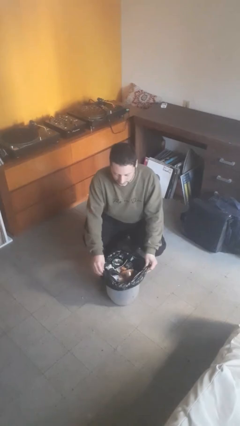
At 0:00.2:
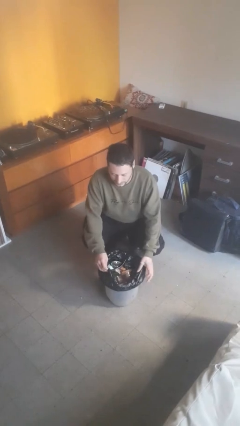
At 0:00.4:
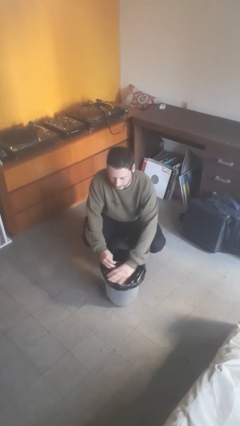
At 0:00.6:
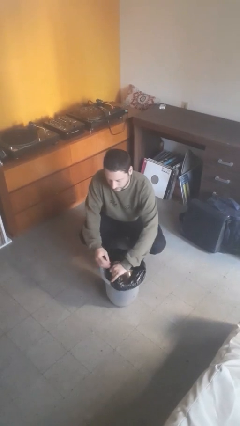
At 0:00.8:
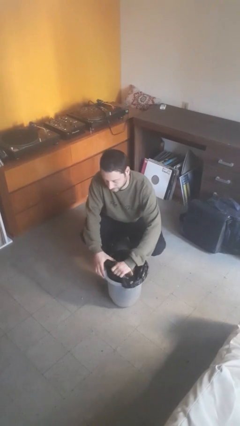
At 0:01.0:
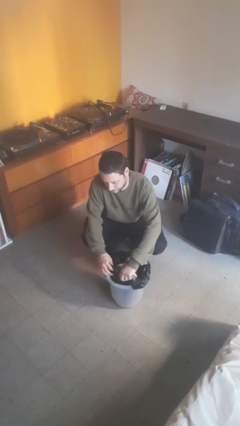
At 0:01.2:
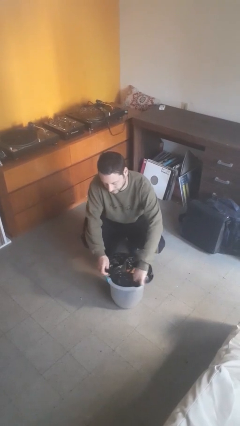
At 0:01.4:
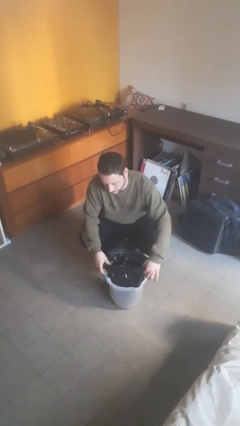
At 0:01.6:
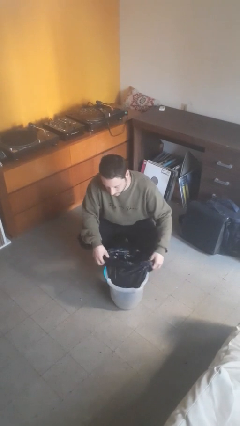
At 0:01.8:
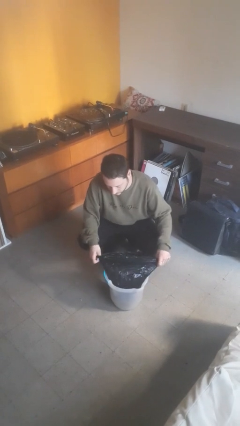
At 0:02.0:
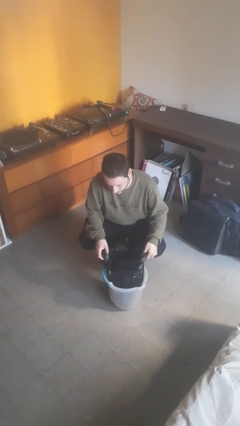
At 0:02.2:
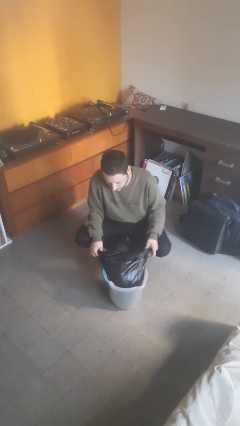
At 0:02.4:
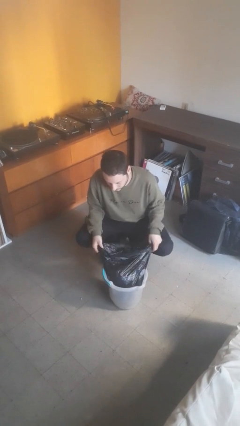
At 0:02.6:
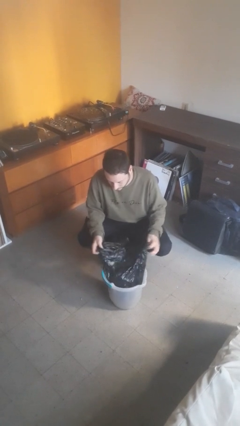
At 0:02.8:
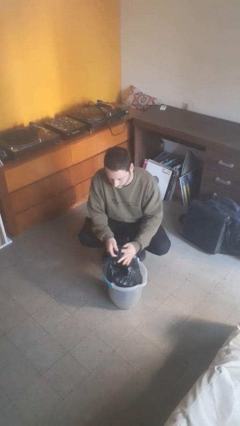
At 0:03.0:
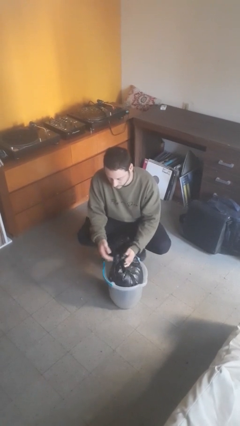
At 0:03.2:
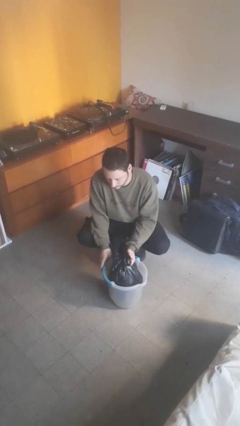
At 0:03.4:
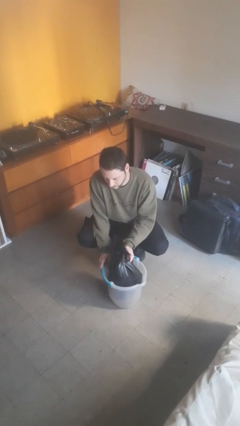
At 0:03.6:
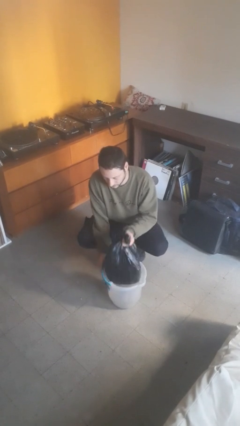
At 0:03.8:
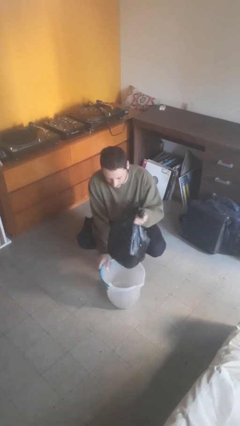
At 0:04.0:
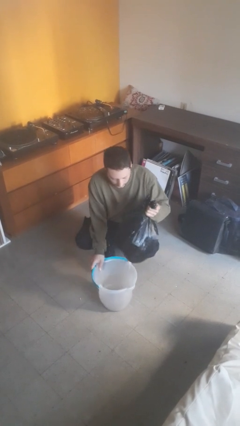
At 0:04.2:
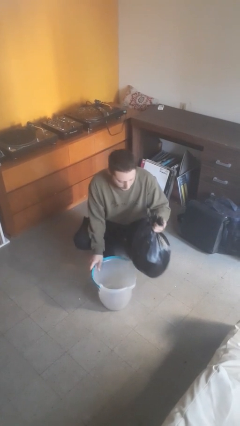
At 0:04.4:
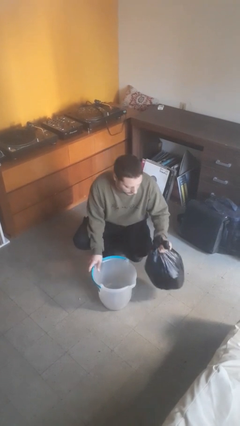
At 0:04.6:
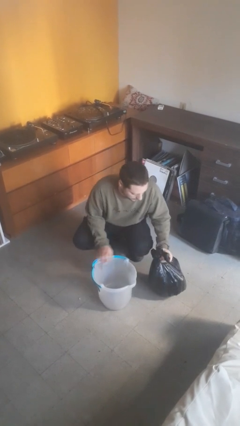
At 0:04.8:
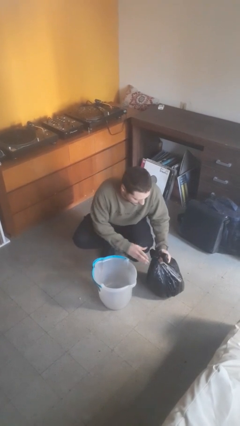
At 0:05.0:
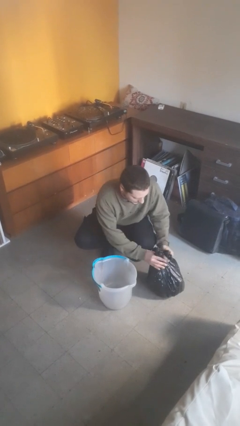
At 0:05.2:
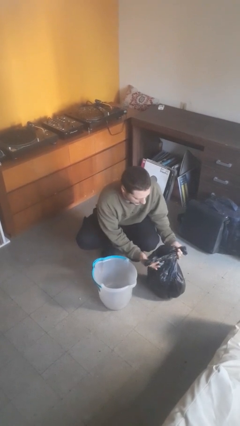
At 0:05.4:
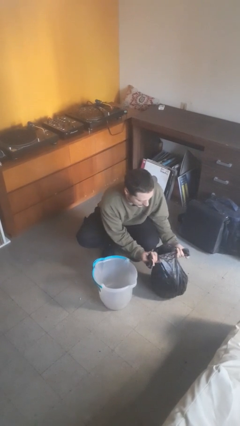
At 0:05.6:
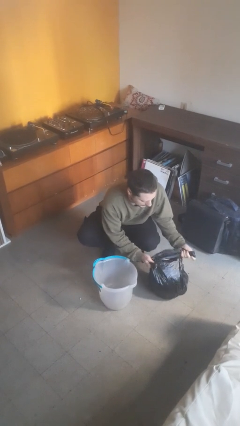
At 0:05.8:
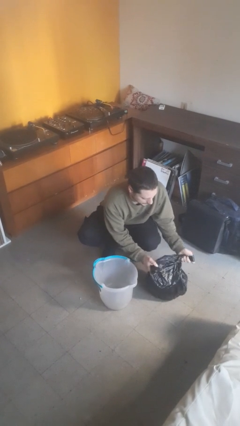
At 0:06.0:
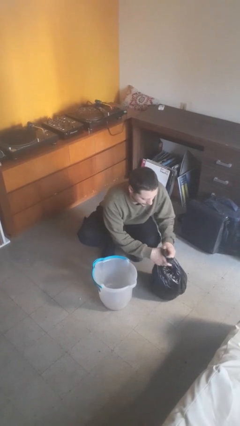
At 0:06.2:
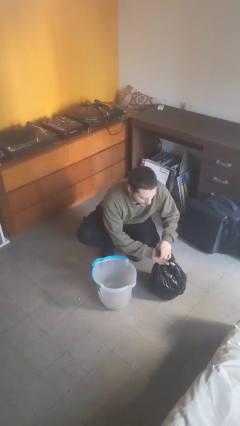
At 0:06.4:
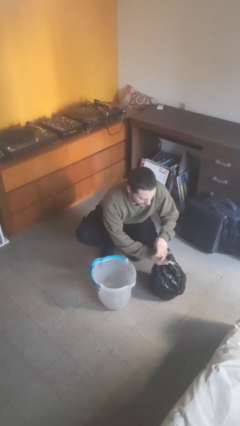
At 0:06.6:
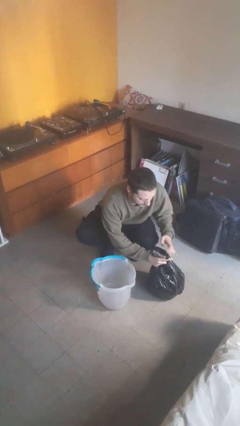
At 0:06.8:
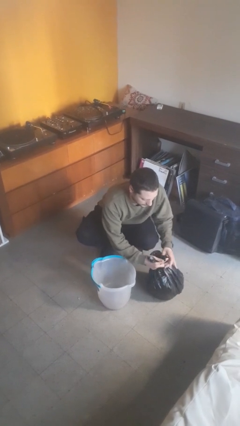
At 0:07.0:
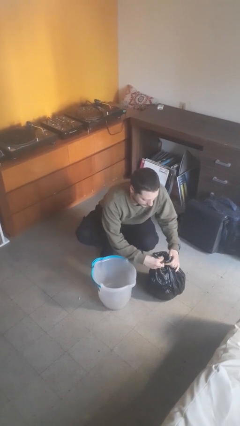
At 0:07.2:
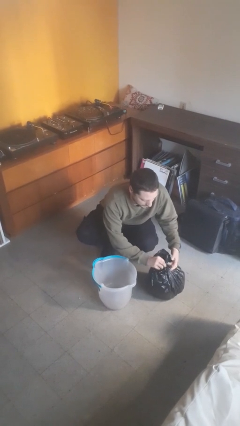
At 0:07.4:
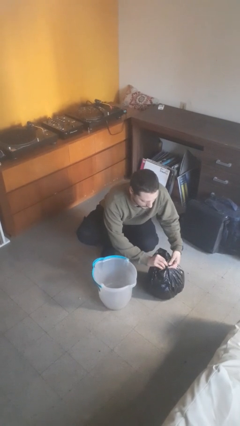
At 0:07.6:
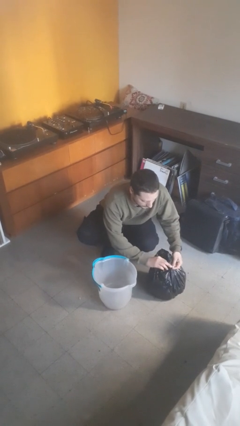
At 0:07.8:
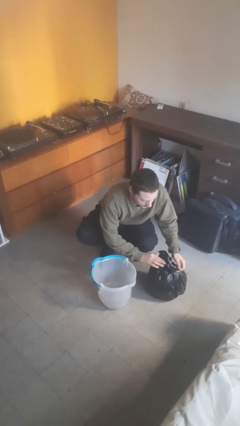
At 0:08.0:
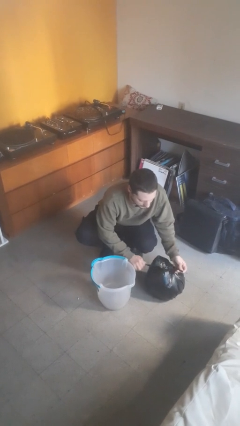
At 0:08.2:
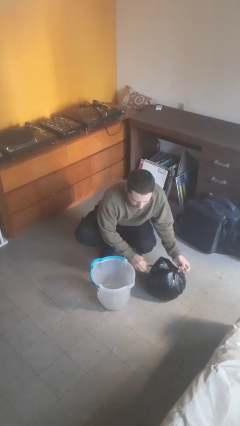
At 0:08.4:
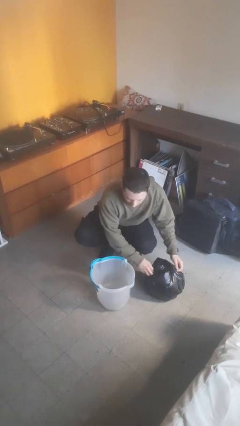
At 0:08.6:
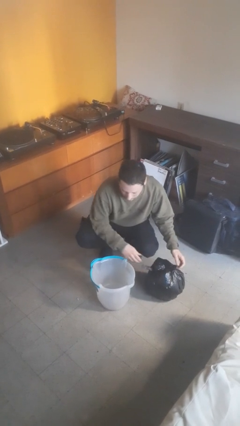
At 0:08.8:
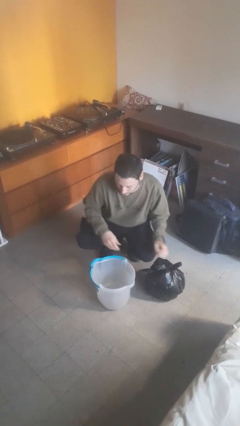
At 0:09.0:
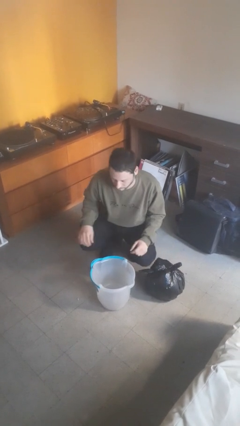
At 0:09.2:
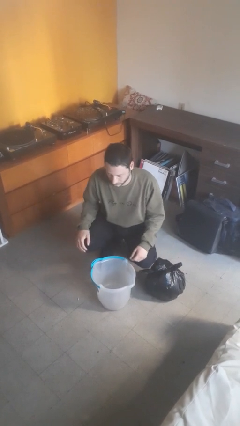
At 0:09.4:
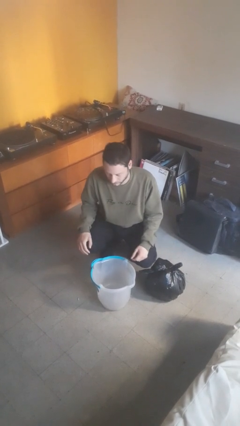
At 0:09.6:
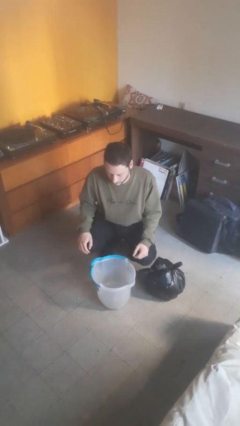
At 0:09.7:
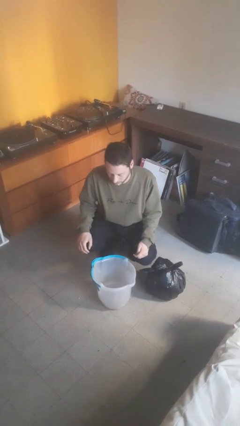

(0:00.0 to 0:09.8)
person removes trashbag from trashcan

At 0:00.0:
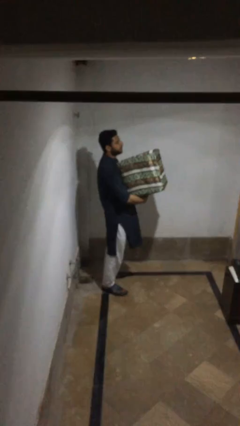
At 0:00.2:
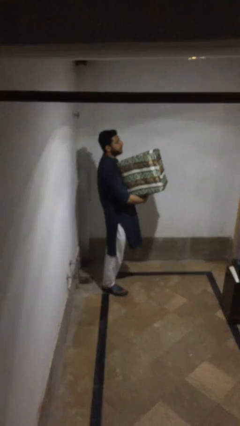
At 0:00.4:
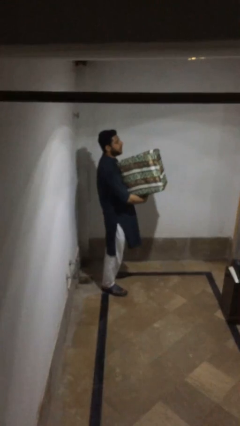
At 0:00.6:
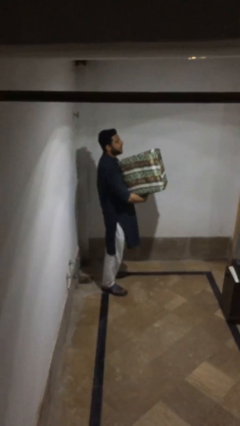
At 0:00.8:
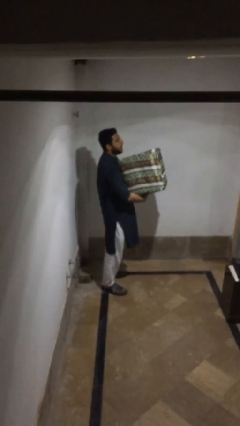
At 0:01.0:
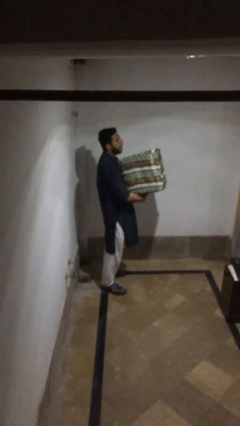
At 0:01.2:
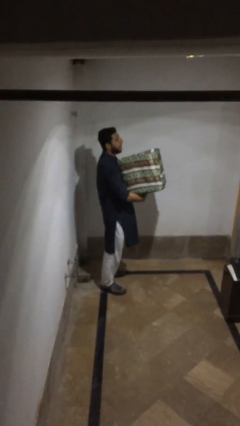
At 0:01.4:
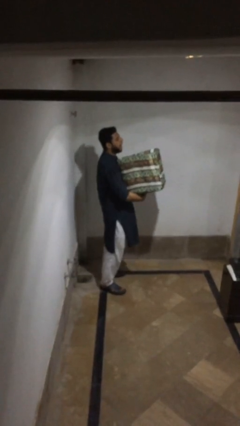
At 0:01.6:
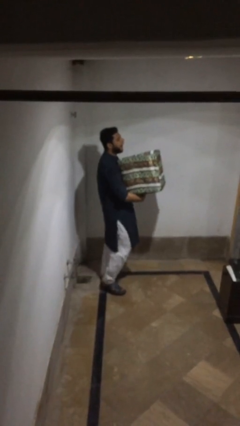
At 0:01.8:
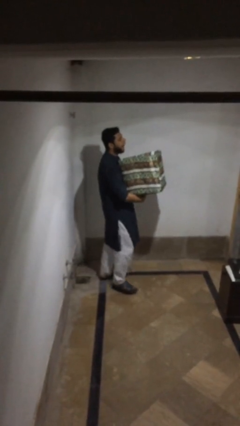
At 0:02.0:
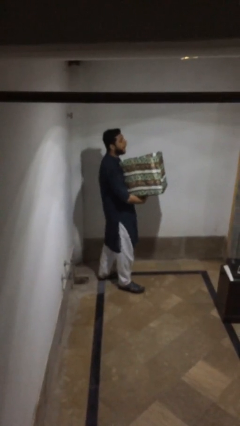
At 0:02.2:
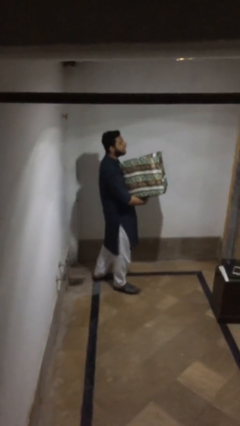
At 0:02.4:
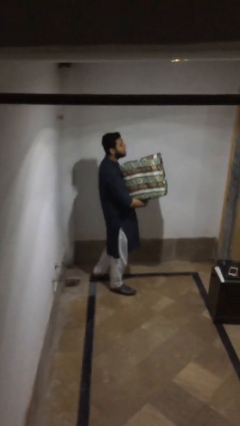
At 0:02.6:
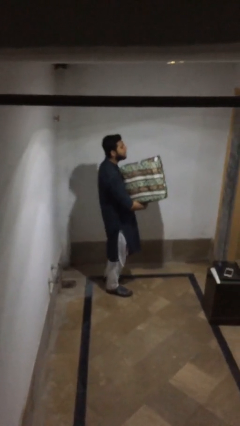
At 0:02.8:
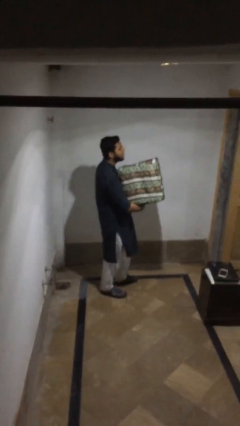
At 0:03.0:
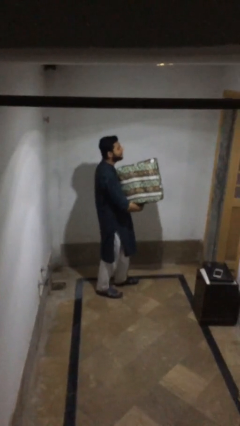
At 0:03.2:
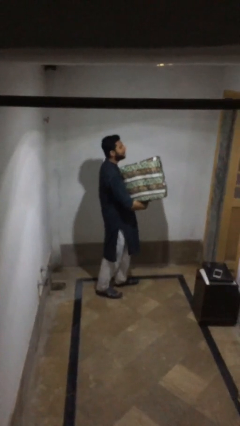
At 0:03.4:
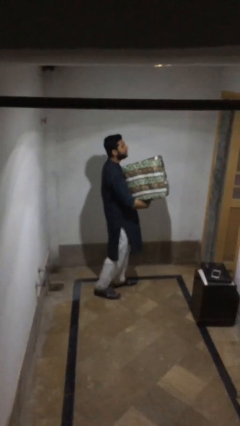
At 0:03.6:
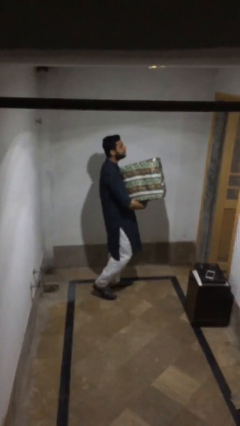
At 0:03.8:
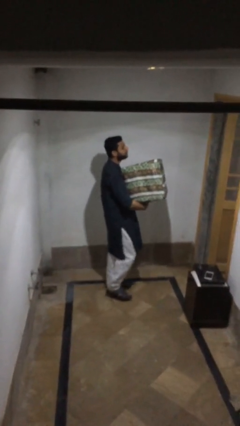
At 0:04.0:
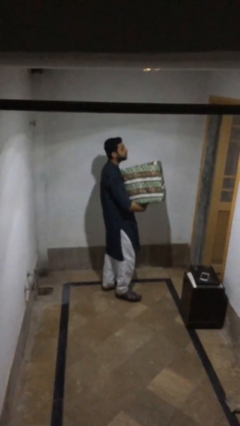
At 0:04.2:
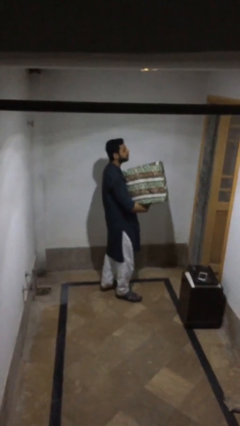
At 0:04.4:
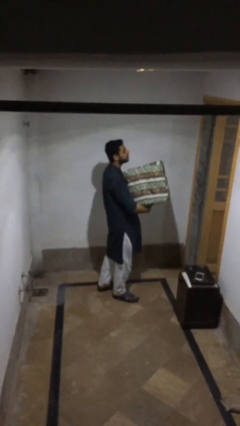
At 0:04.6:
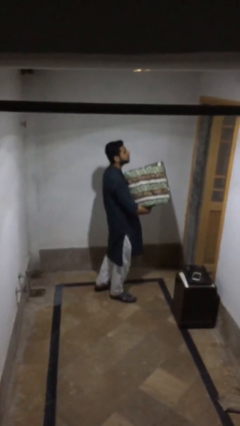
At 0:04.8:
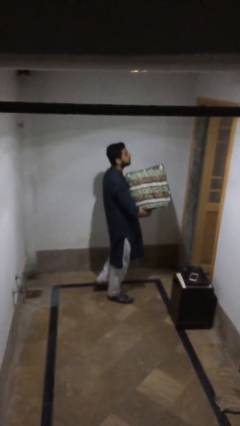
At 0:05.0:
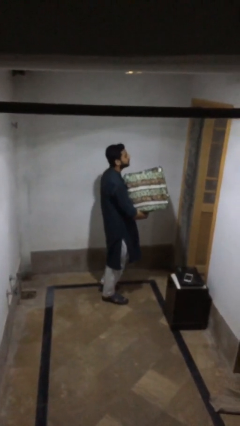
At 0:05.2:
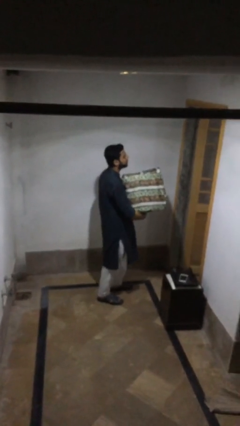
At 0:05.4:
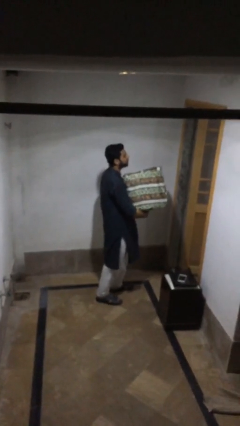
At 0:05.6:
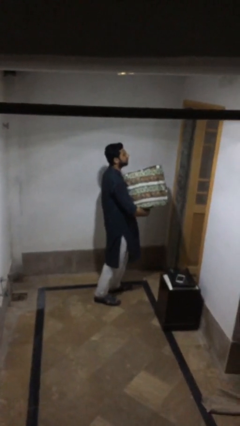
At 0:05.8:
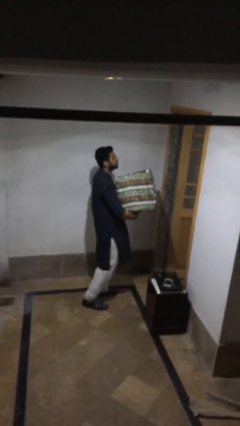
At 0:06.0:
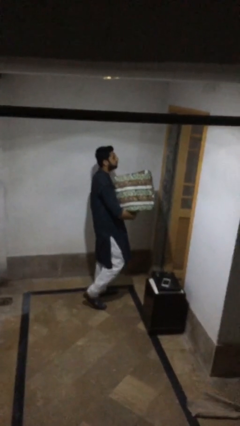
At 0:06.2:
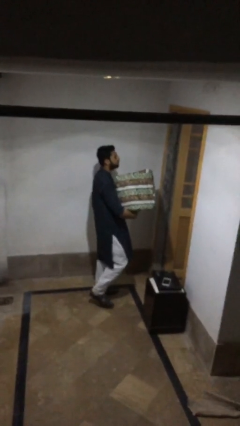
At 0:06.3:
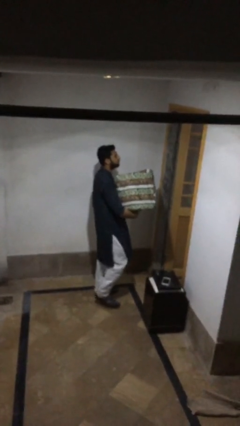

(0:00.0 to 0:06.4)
person carries heavy object

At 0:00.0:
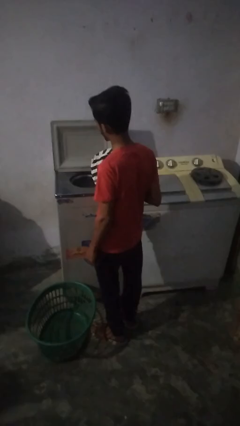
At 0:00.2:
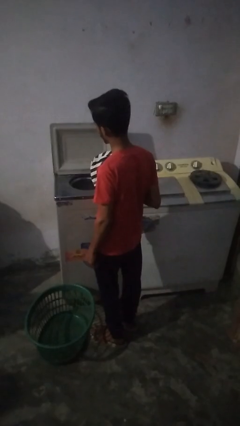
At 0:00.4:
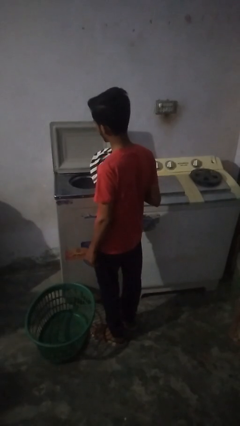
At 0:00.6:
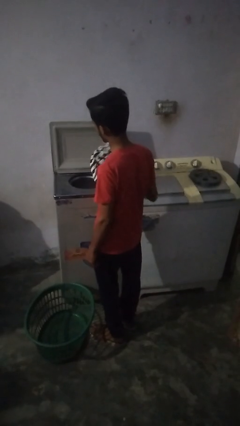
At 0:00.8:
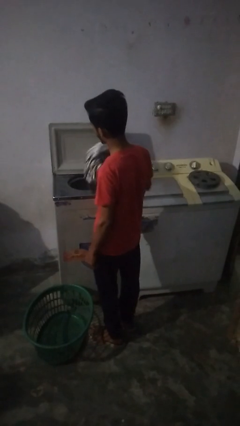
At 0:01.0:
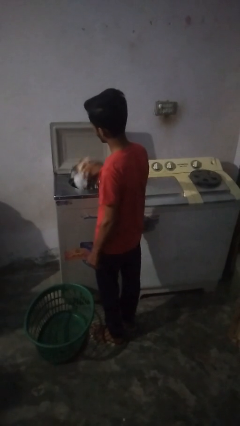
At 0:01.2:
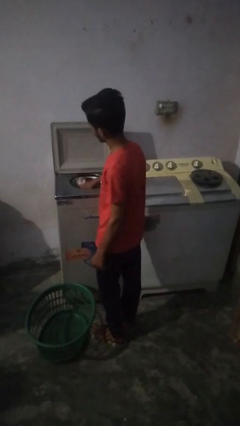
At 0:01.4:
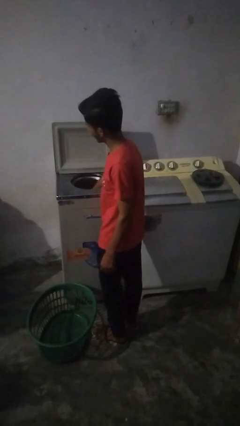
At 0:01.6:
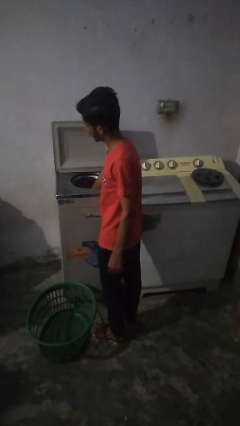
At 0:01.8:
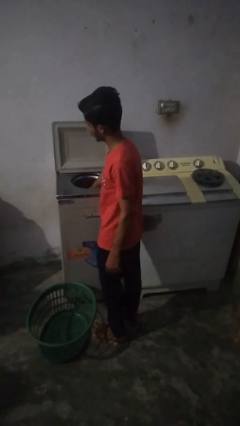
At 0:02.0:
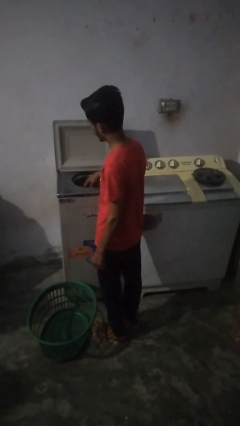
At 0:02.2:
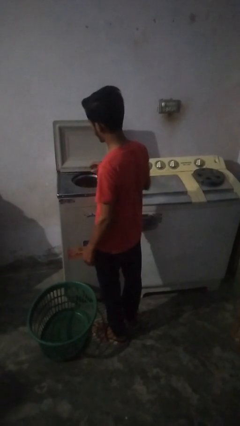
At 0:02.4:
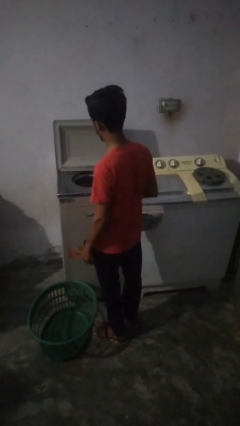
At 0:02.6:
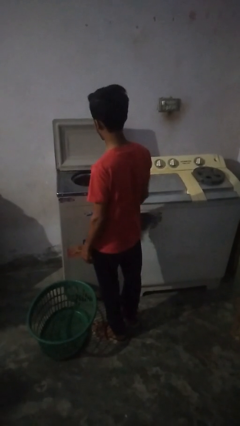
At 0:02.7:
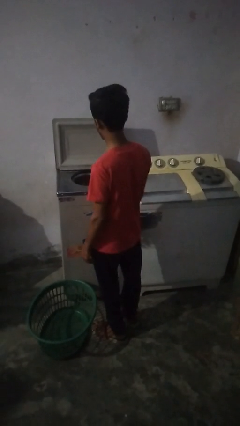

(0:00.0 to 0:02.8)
person loads dryer
